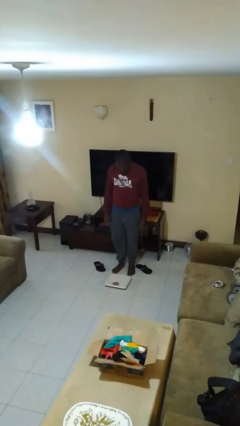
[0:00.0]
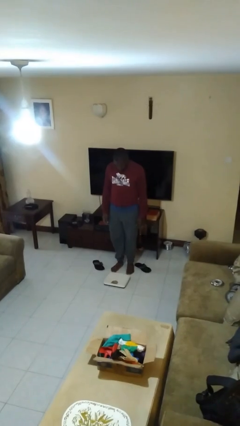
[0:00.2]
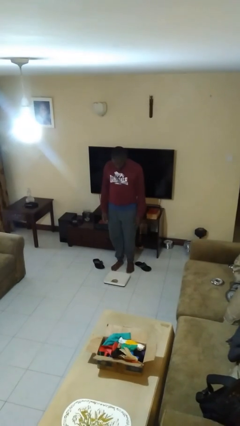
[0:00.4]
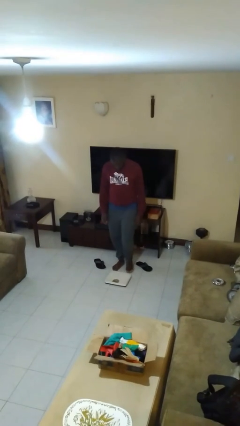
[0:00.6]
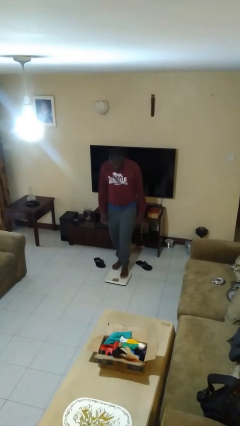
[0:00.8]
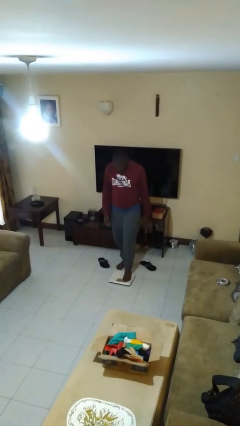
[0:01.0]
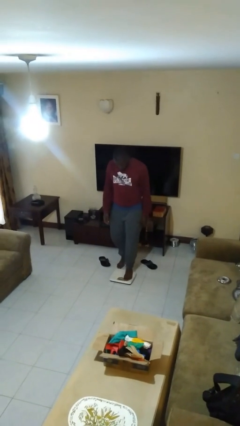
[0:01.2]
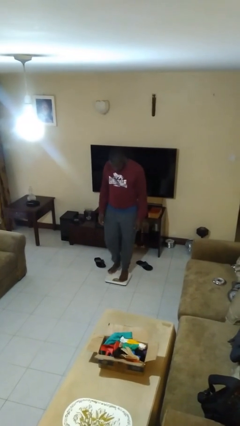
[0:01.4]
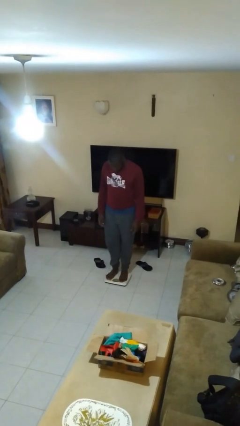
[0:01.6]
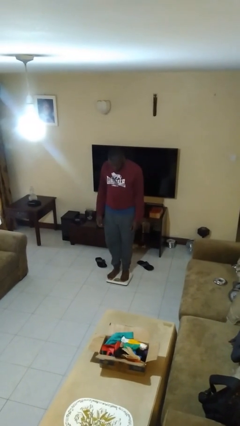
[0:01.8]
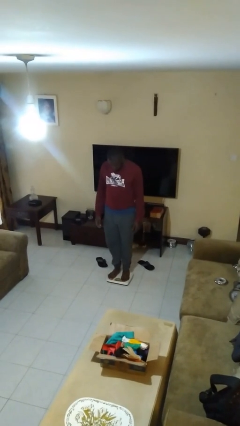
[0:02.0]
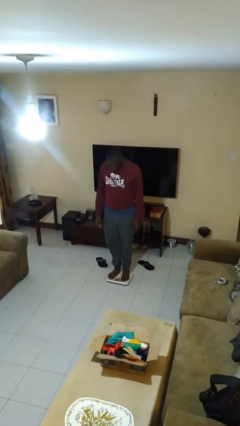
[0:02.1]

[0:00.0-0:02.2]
person uses bodyweight scale

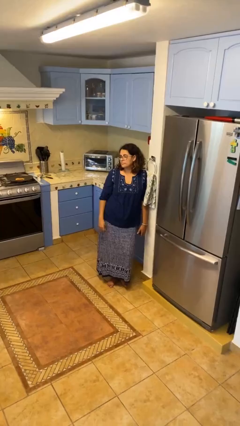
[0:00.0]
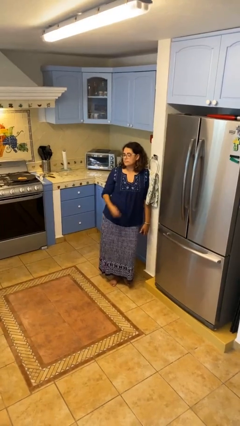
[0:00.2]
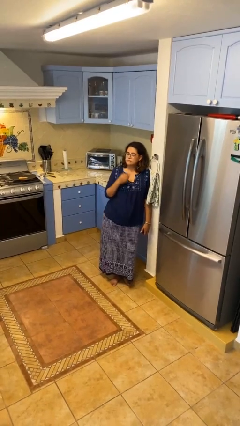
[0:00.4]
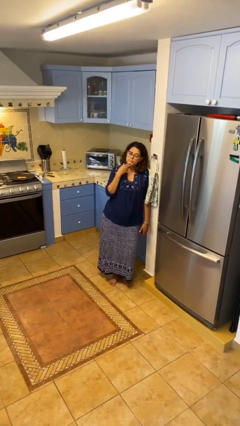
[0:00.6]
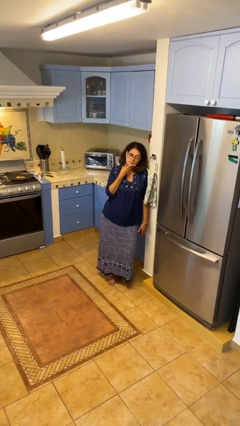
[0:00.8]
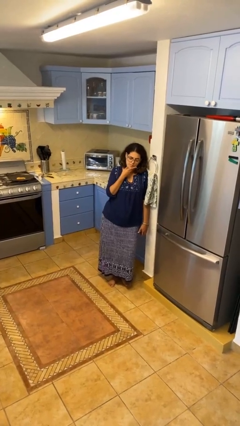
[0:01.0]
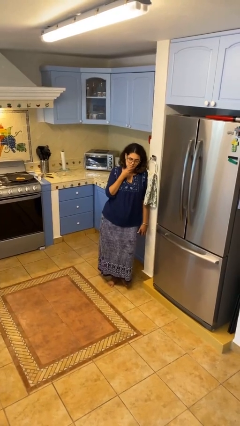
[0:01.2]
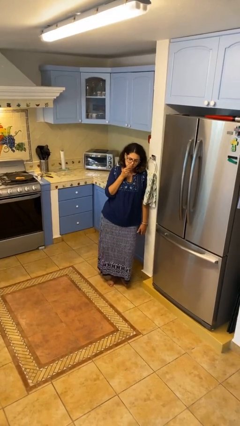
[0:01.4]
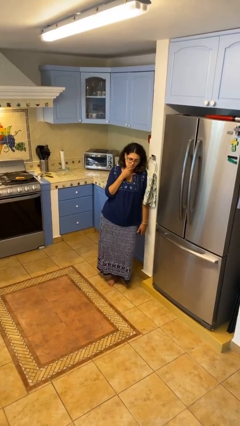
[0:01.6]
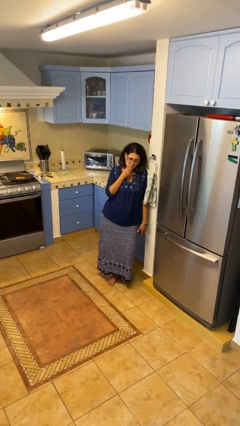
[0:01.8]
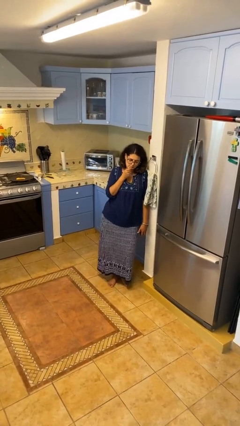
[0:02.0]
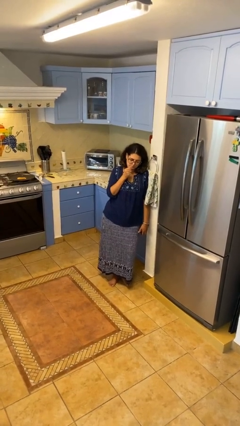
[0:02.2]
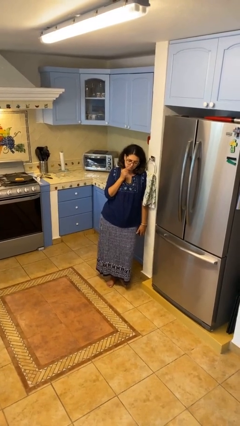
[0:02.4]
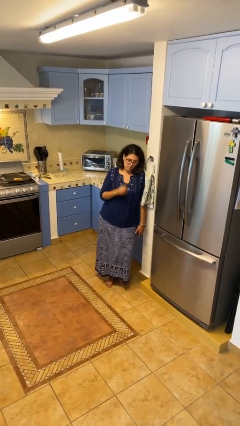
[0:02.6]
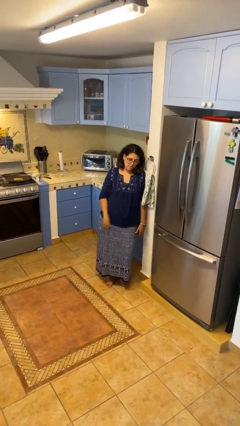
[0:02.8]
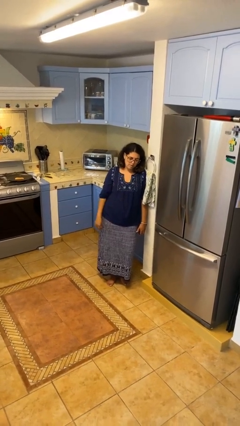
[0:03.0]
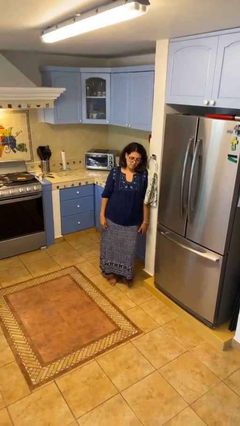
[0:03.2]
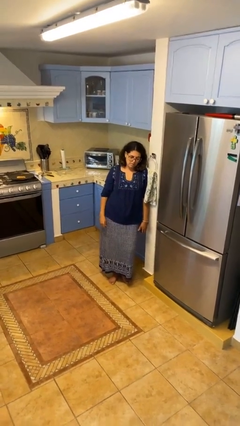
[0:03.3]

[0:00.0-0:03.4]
person strokes chin

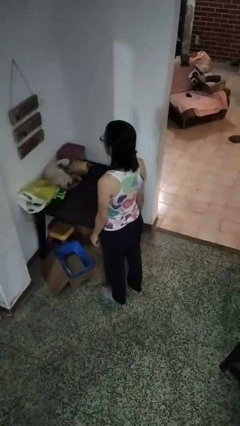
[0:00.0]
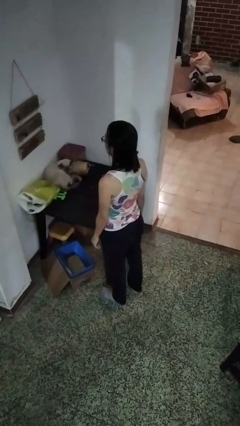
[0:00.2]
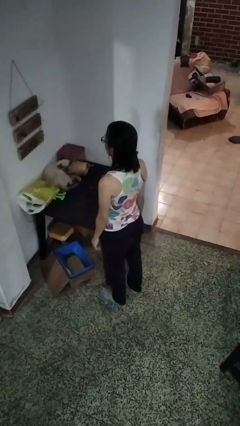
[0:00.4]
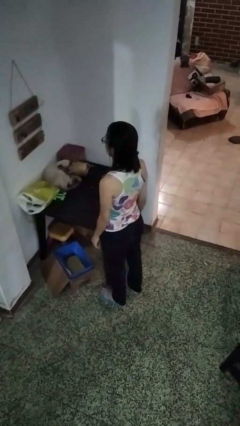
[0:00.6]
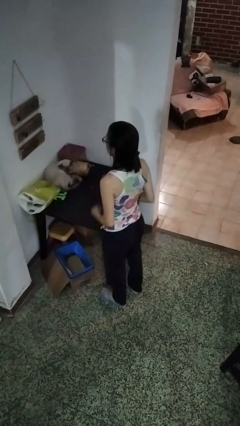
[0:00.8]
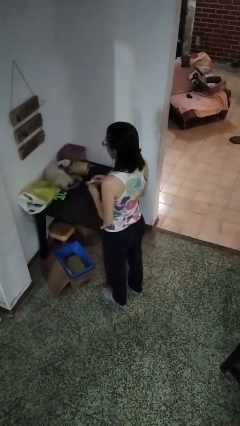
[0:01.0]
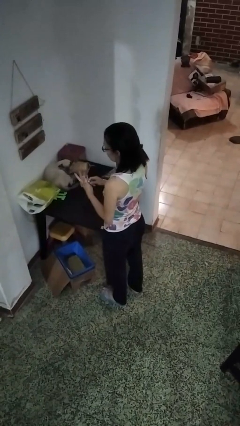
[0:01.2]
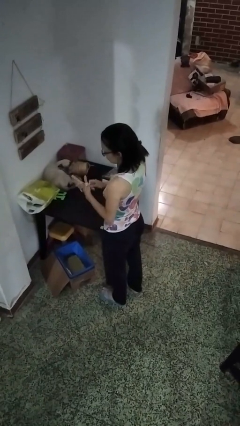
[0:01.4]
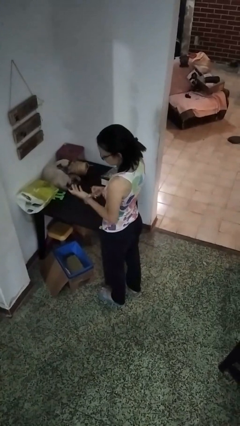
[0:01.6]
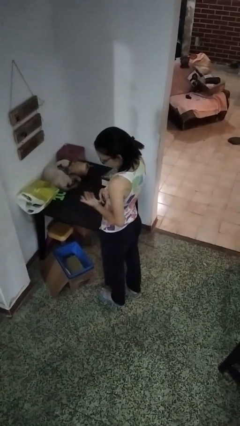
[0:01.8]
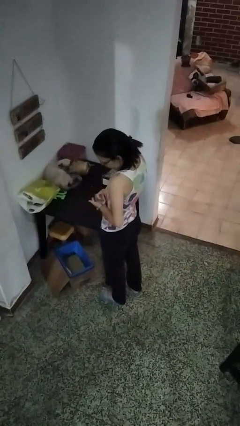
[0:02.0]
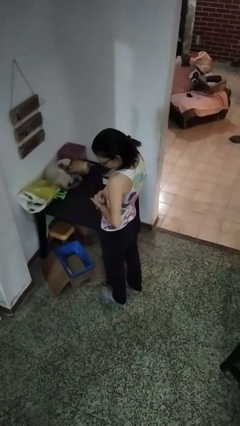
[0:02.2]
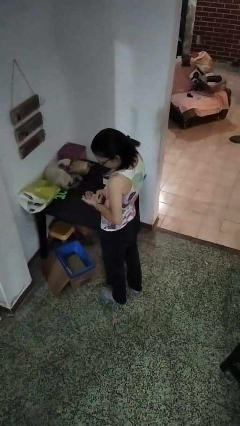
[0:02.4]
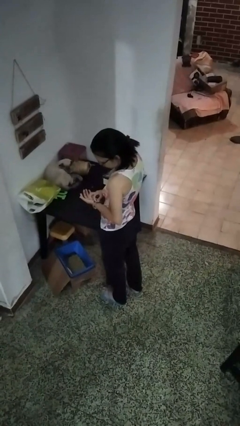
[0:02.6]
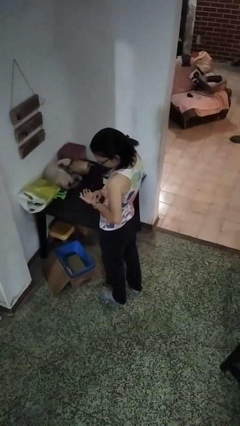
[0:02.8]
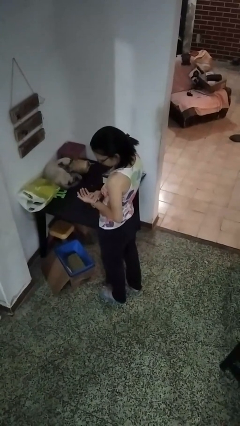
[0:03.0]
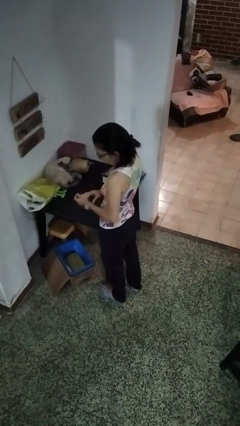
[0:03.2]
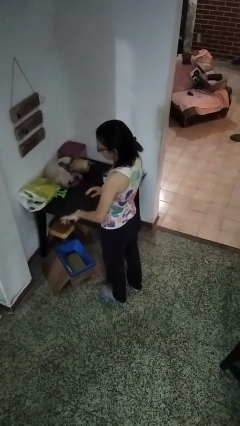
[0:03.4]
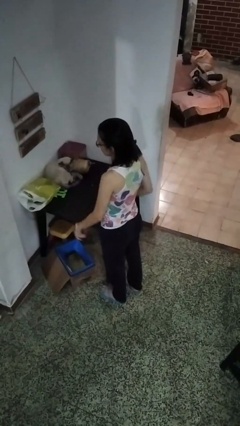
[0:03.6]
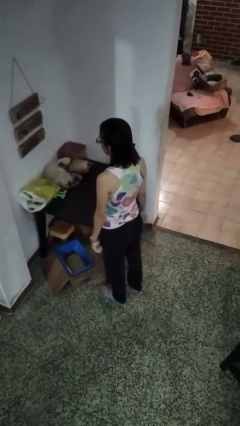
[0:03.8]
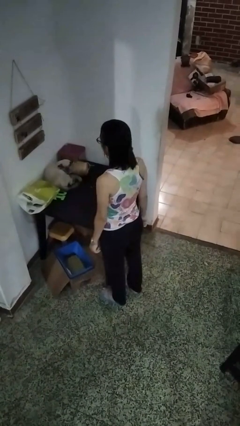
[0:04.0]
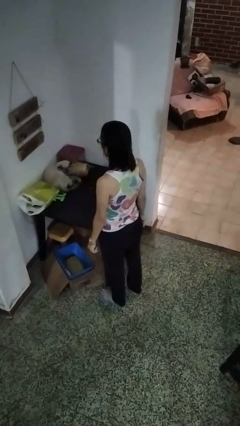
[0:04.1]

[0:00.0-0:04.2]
person puts on wristwatch

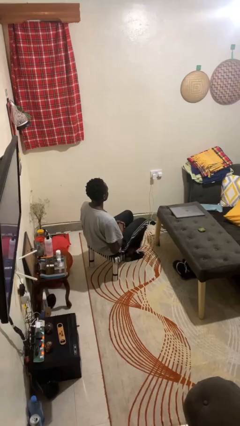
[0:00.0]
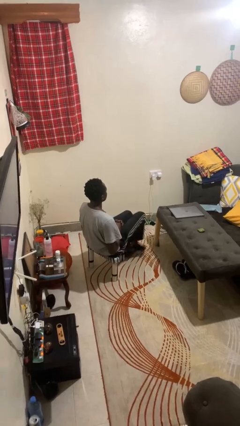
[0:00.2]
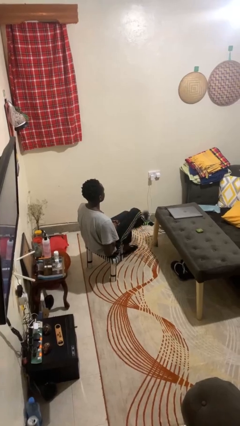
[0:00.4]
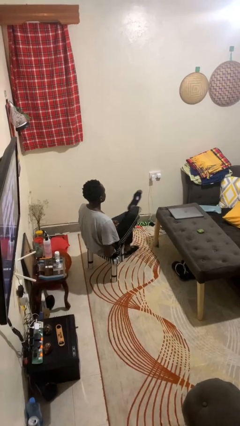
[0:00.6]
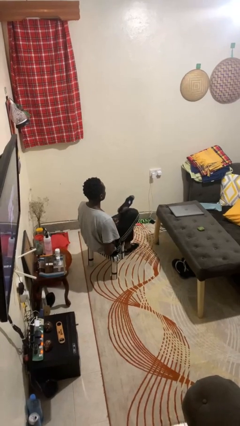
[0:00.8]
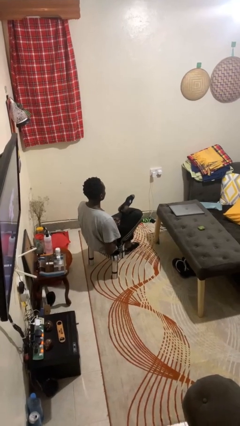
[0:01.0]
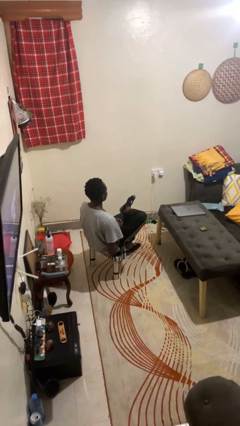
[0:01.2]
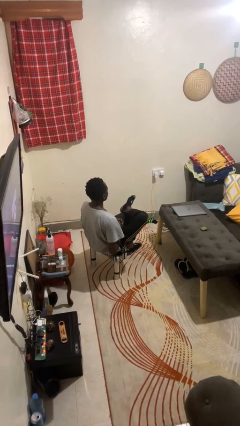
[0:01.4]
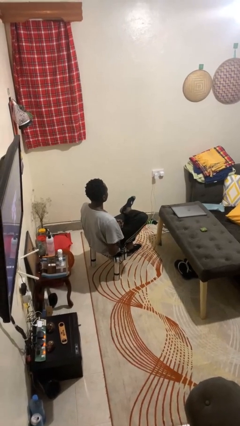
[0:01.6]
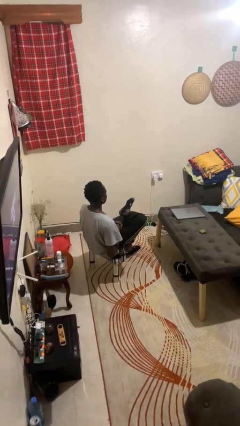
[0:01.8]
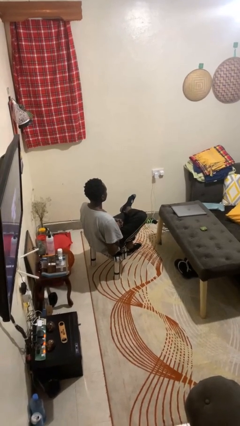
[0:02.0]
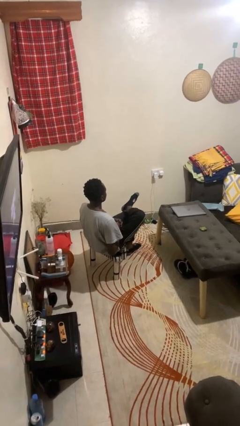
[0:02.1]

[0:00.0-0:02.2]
person crosses legs

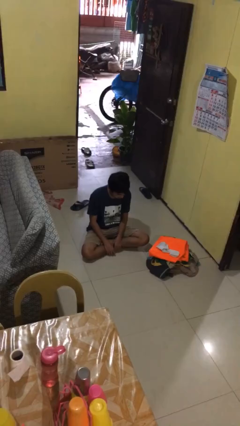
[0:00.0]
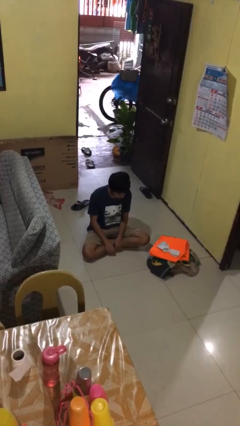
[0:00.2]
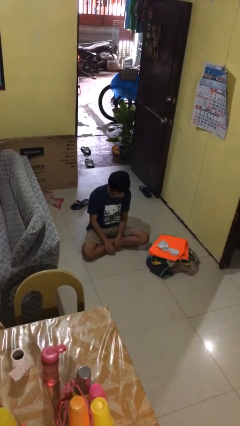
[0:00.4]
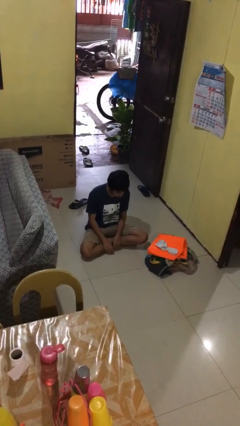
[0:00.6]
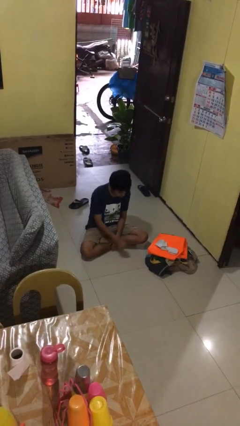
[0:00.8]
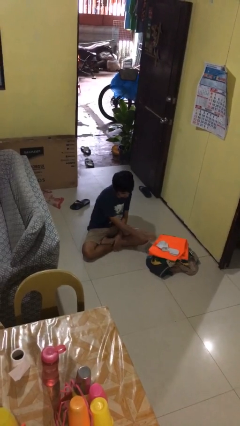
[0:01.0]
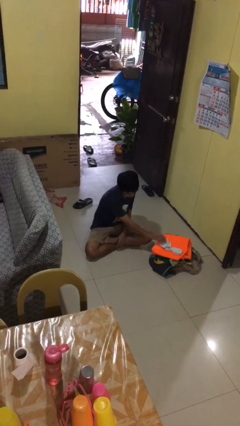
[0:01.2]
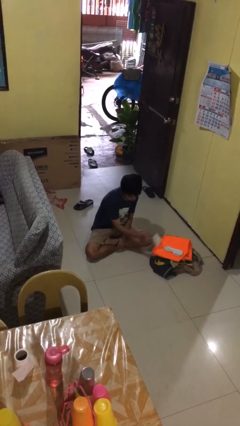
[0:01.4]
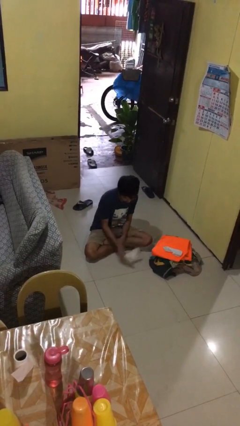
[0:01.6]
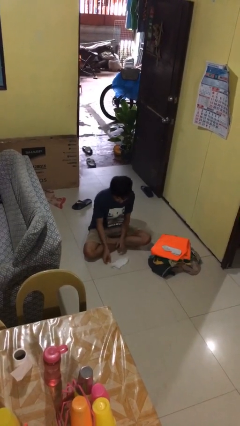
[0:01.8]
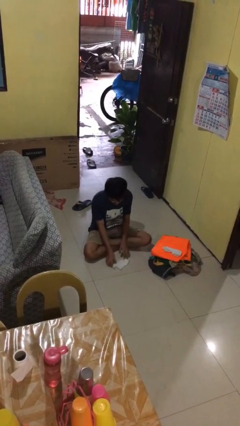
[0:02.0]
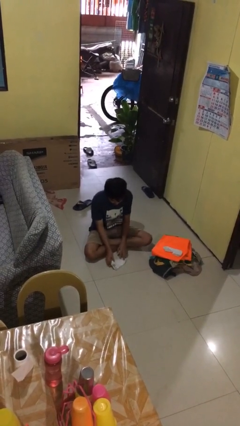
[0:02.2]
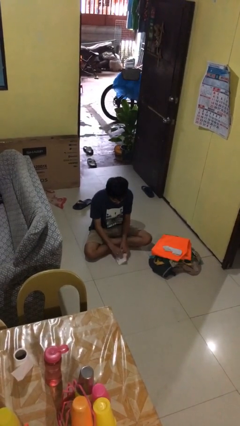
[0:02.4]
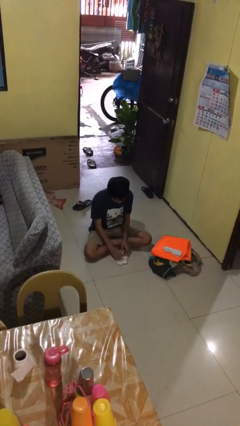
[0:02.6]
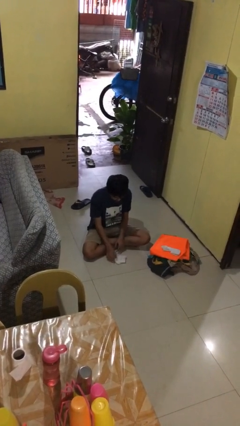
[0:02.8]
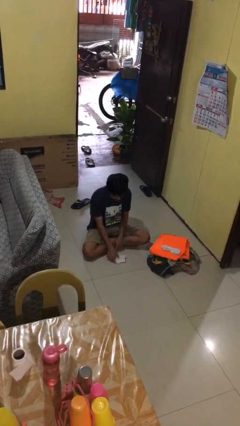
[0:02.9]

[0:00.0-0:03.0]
person folds socks

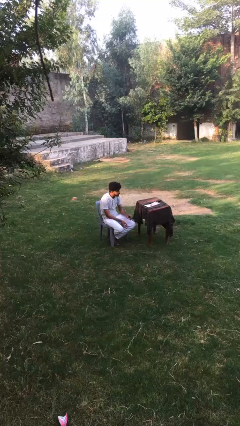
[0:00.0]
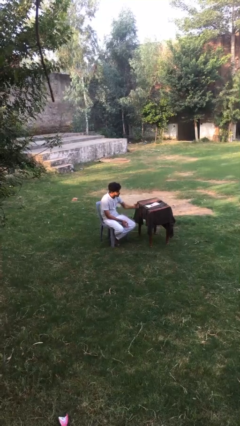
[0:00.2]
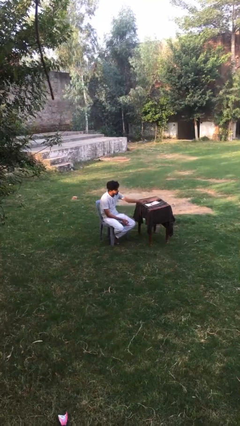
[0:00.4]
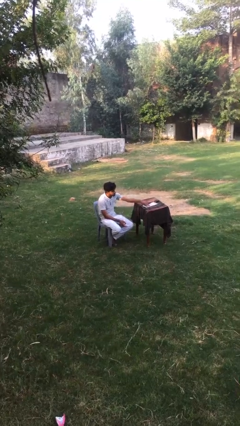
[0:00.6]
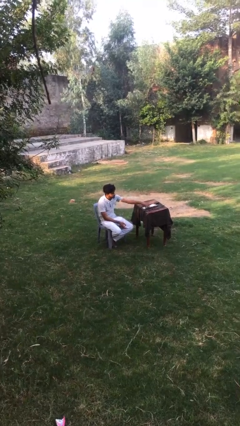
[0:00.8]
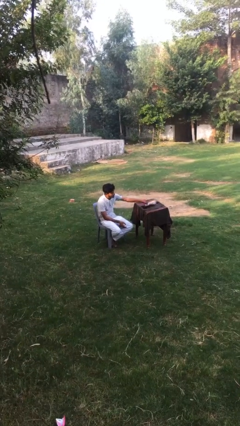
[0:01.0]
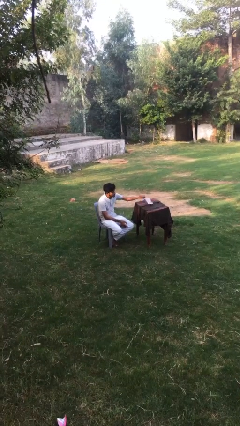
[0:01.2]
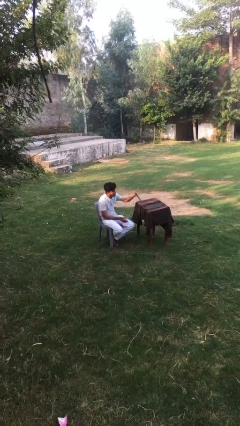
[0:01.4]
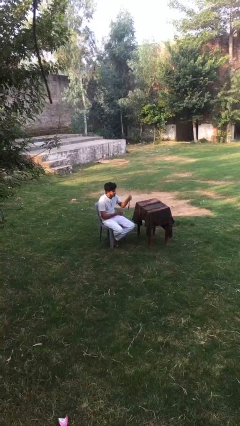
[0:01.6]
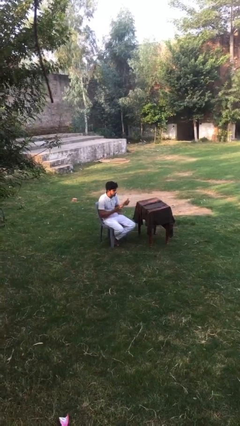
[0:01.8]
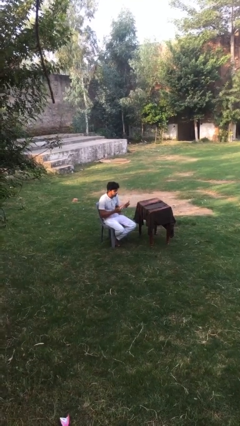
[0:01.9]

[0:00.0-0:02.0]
person picks up object from table

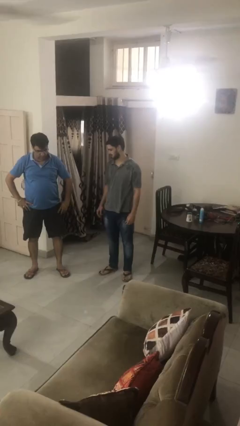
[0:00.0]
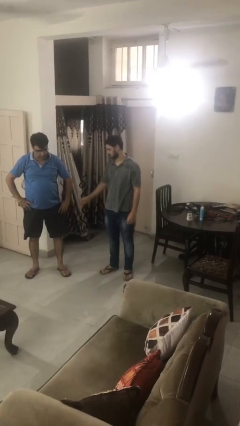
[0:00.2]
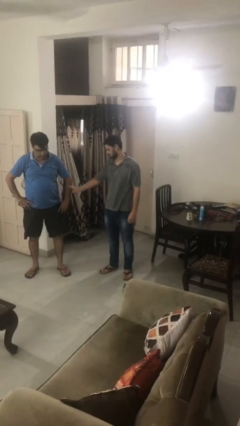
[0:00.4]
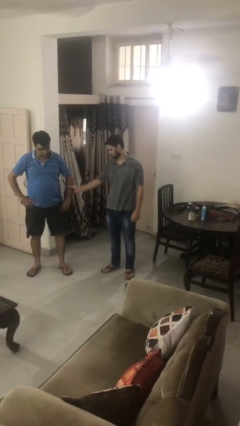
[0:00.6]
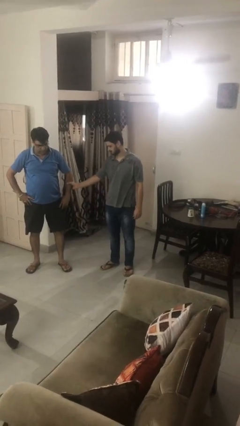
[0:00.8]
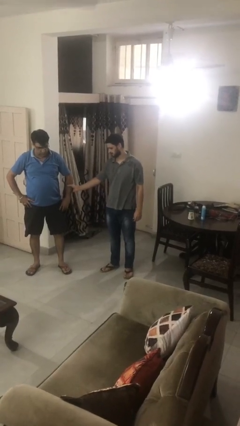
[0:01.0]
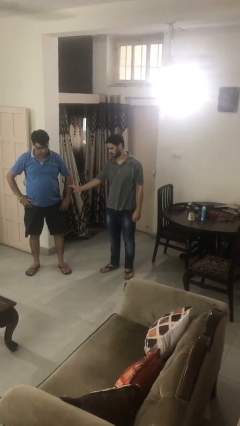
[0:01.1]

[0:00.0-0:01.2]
person grabs person by forearm
